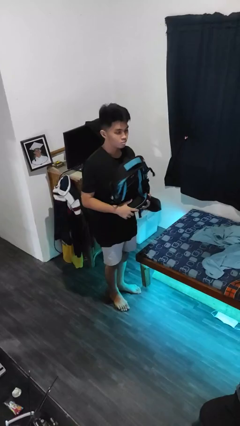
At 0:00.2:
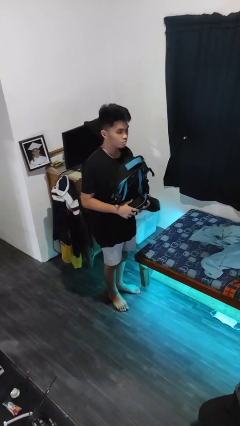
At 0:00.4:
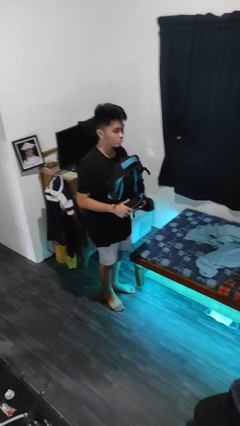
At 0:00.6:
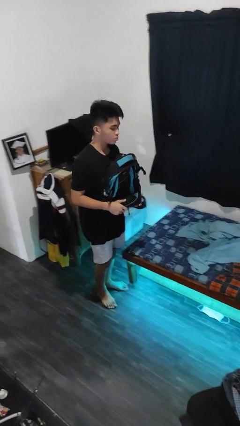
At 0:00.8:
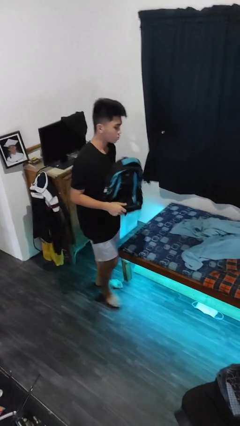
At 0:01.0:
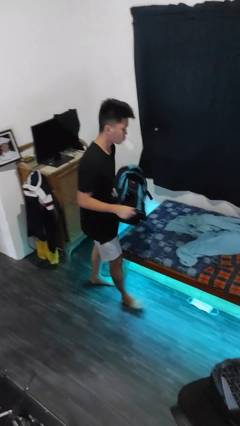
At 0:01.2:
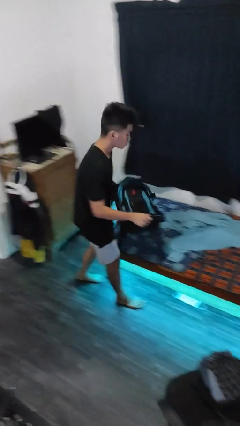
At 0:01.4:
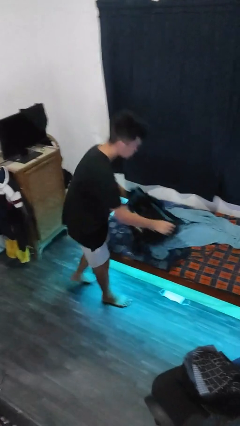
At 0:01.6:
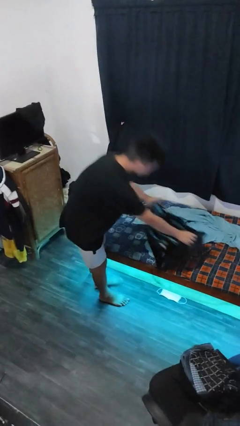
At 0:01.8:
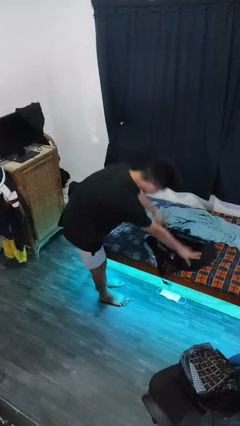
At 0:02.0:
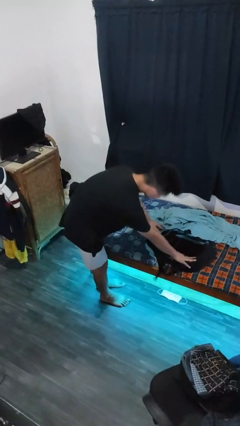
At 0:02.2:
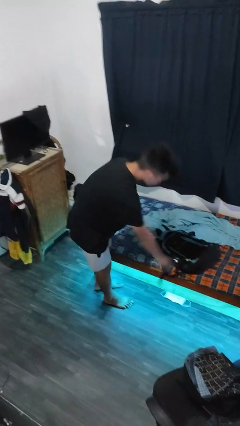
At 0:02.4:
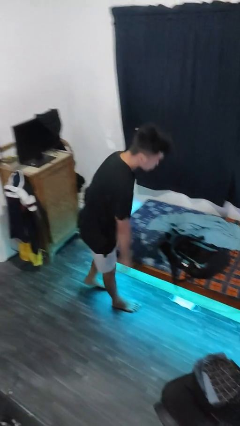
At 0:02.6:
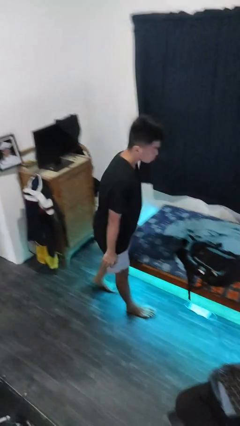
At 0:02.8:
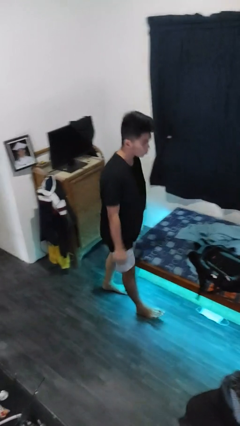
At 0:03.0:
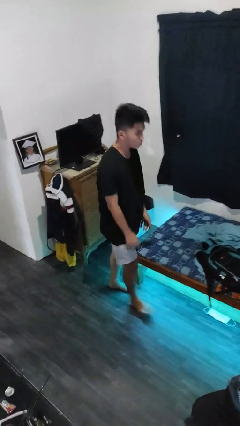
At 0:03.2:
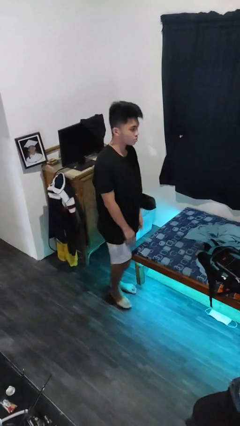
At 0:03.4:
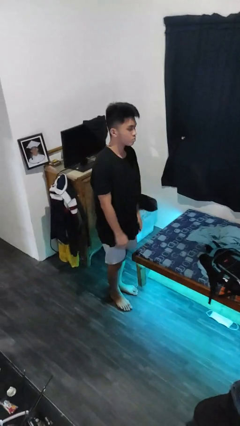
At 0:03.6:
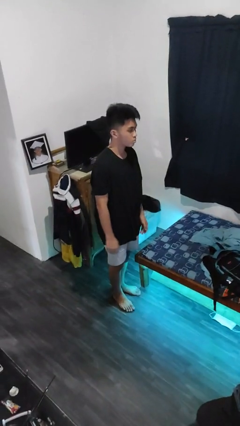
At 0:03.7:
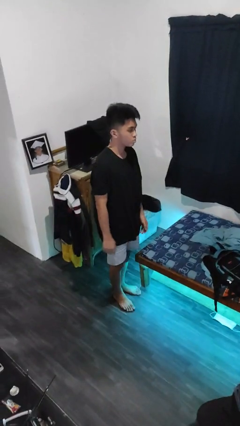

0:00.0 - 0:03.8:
person puts down object on bed

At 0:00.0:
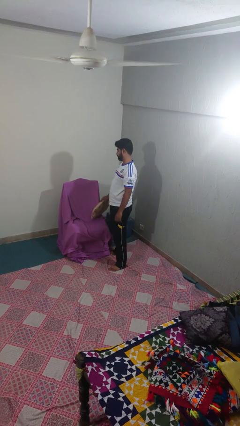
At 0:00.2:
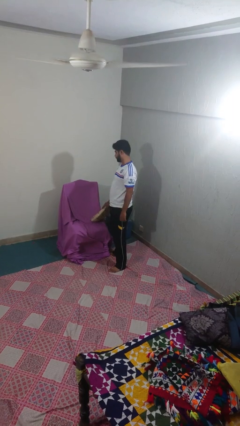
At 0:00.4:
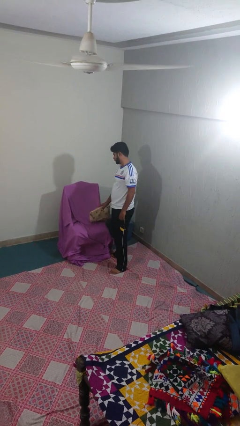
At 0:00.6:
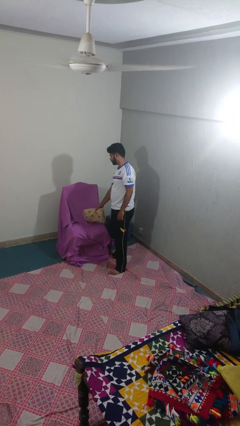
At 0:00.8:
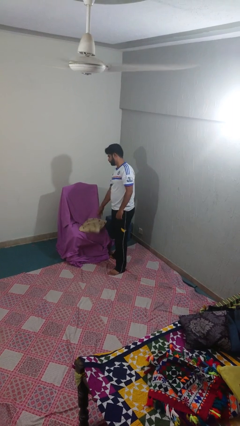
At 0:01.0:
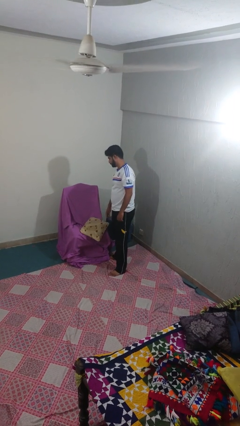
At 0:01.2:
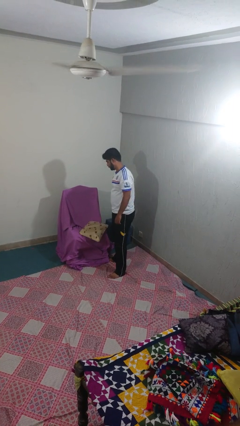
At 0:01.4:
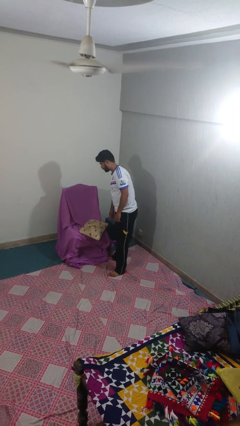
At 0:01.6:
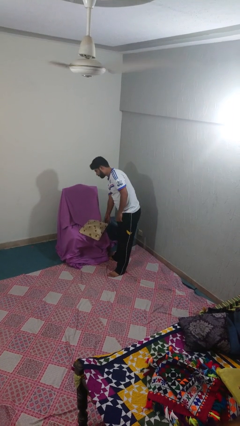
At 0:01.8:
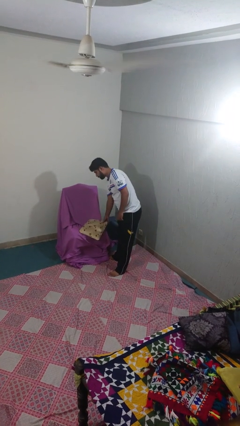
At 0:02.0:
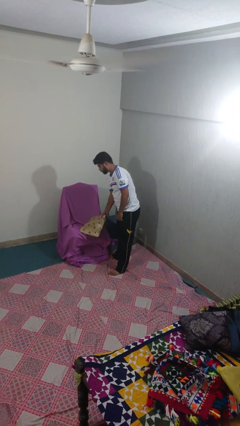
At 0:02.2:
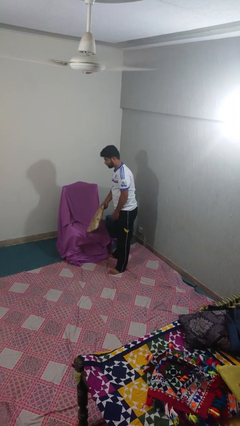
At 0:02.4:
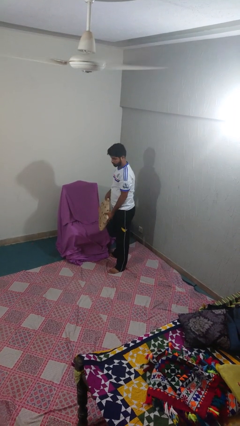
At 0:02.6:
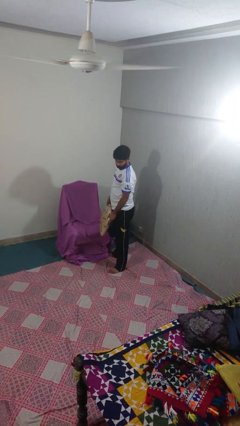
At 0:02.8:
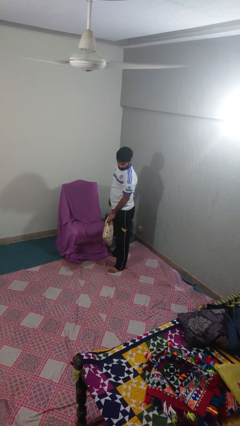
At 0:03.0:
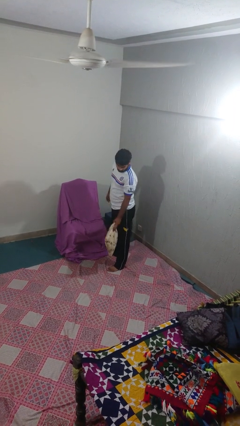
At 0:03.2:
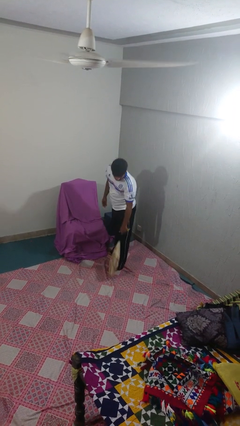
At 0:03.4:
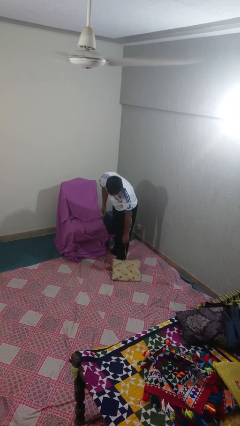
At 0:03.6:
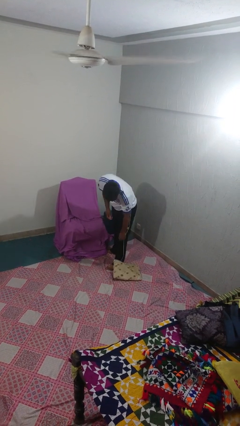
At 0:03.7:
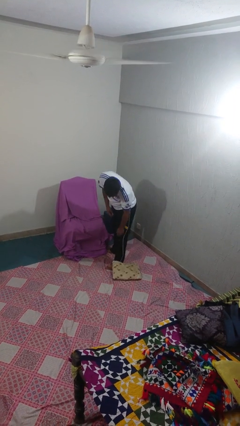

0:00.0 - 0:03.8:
person drops object

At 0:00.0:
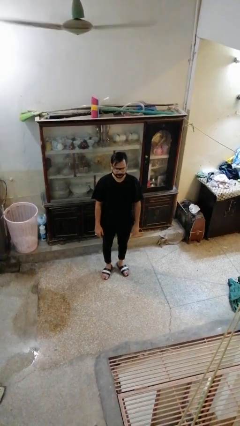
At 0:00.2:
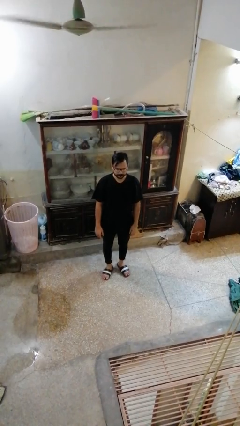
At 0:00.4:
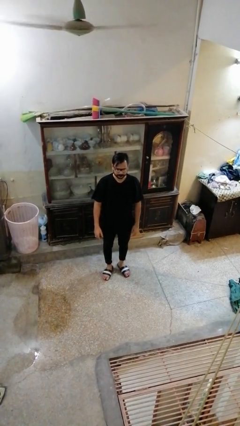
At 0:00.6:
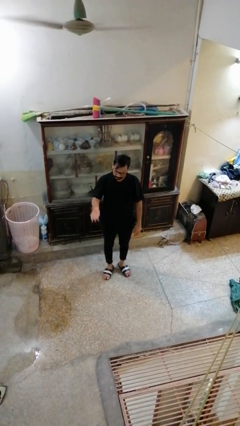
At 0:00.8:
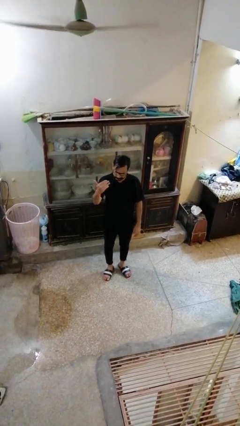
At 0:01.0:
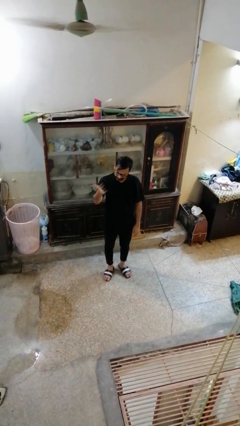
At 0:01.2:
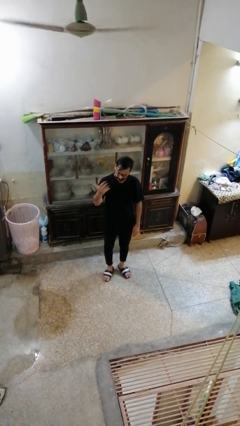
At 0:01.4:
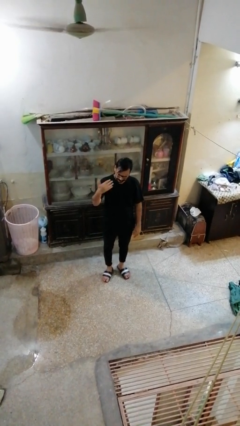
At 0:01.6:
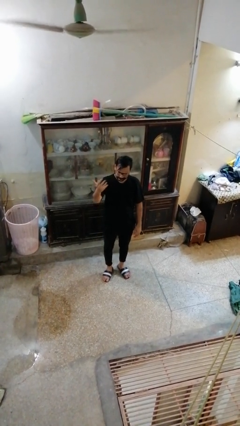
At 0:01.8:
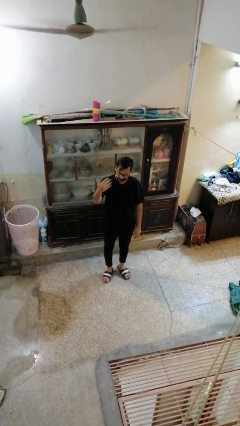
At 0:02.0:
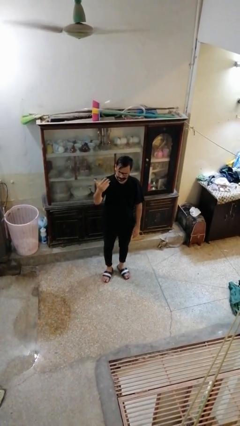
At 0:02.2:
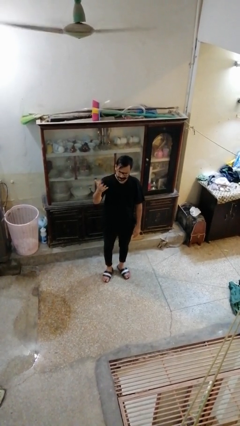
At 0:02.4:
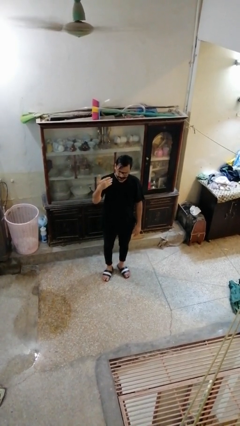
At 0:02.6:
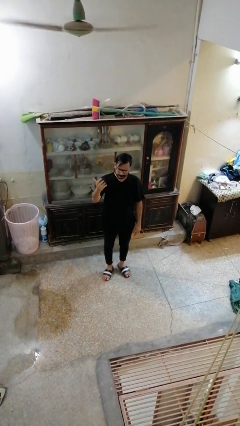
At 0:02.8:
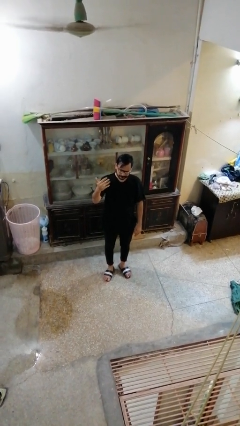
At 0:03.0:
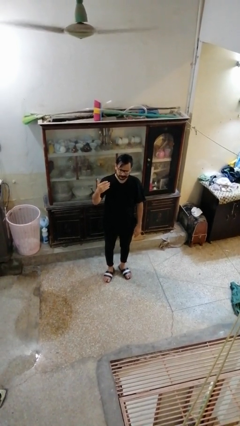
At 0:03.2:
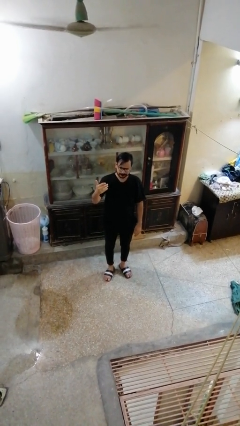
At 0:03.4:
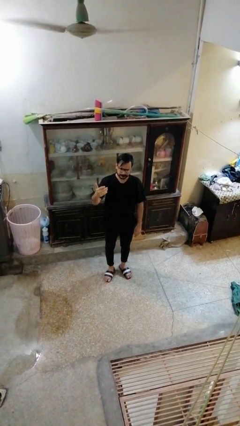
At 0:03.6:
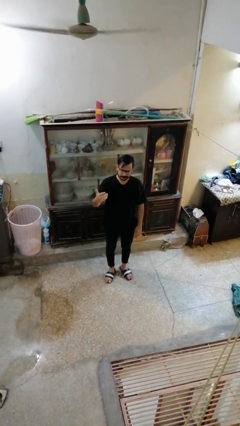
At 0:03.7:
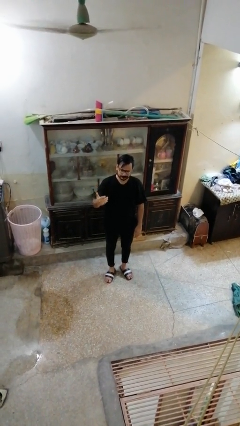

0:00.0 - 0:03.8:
person gestures come here

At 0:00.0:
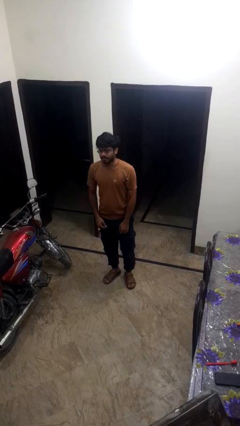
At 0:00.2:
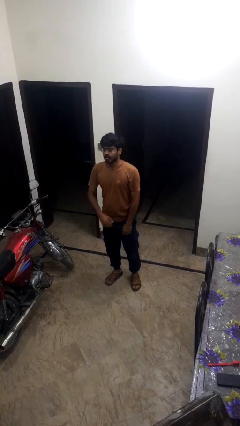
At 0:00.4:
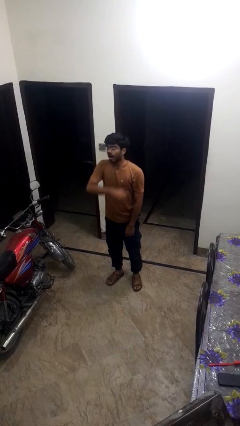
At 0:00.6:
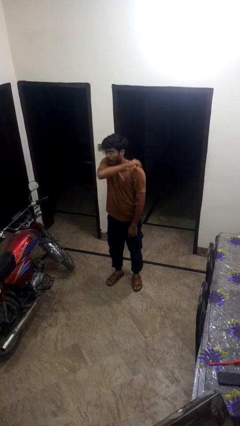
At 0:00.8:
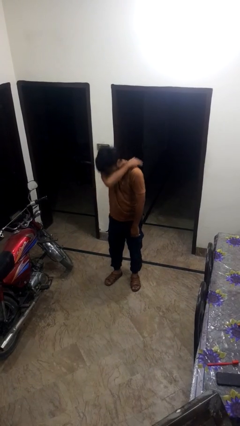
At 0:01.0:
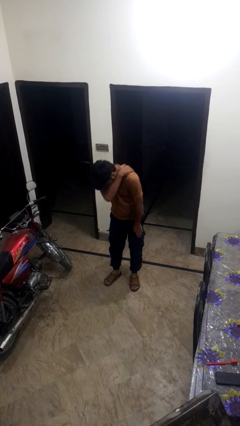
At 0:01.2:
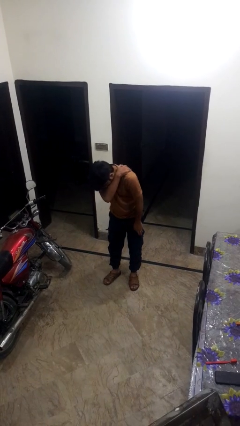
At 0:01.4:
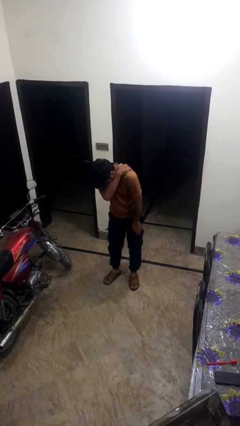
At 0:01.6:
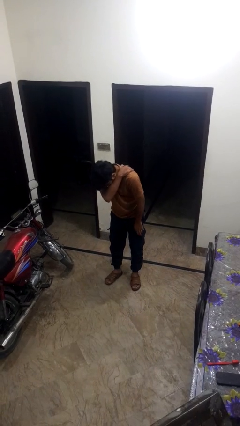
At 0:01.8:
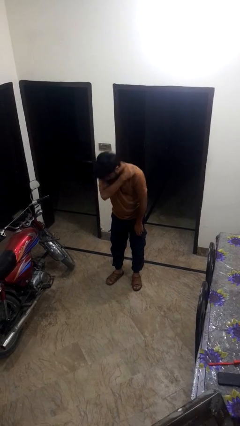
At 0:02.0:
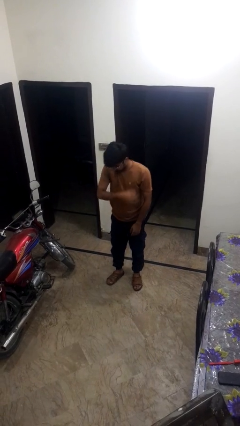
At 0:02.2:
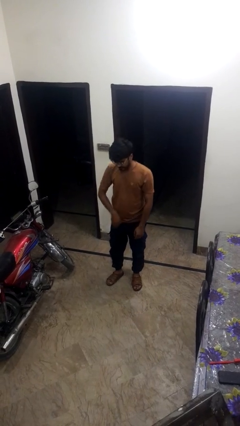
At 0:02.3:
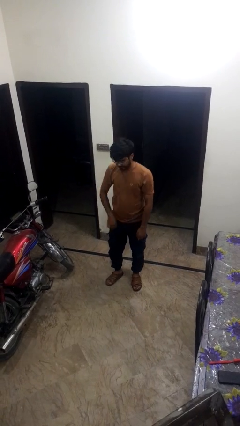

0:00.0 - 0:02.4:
person sneezes into arm

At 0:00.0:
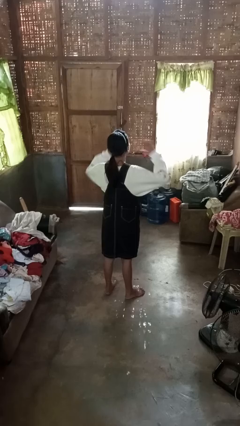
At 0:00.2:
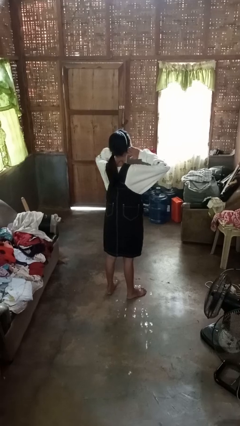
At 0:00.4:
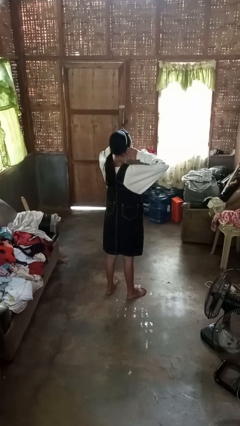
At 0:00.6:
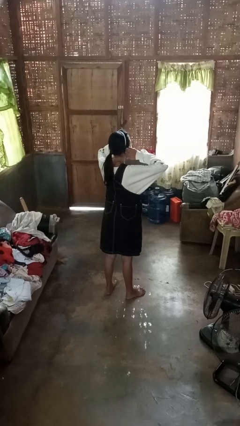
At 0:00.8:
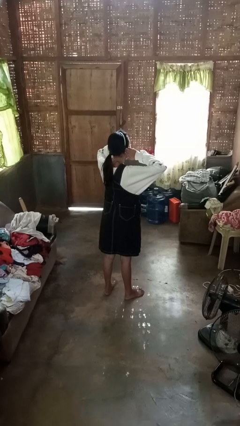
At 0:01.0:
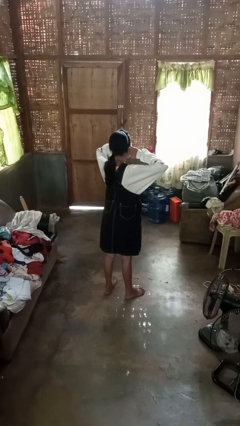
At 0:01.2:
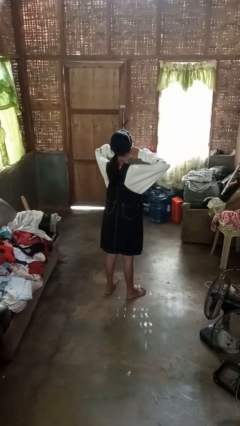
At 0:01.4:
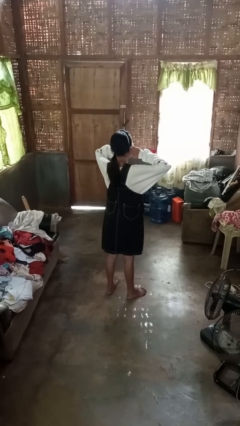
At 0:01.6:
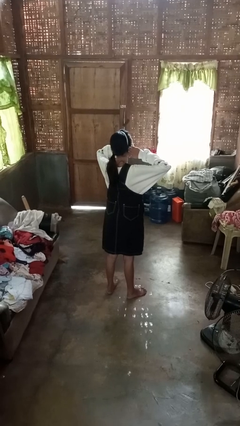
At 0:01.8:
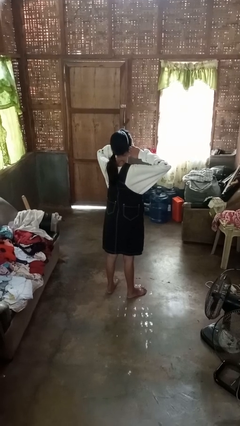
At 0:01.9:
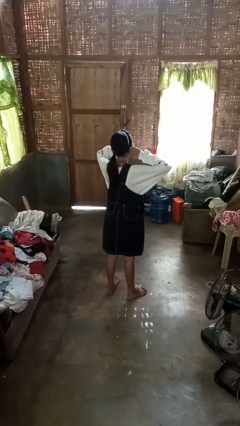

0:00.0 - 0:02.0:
person puts fingers in ear

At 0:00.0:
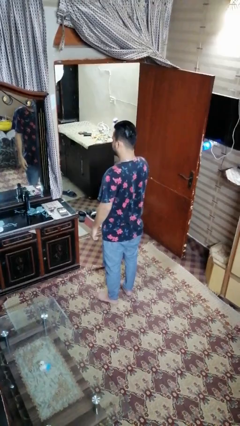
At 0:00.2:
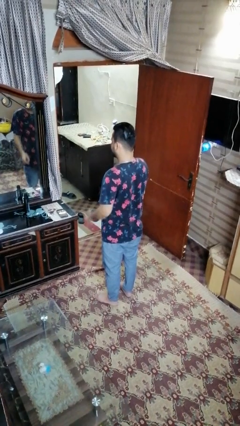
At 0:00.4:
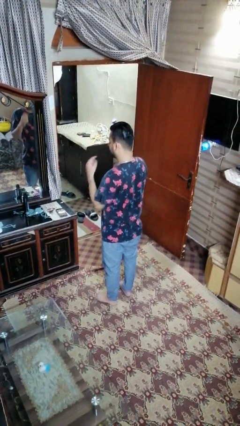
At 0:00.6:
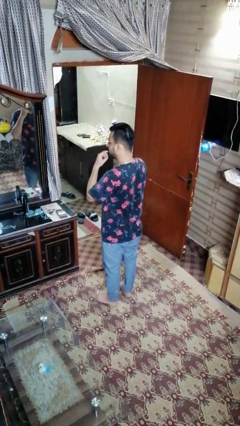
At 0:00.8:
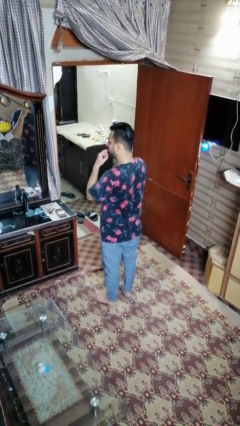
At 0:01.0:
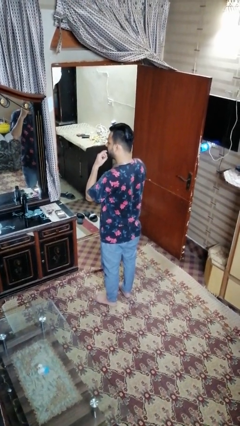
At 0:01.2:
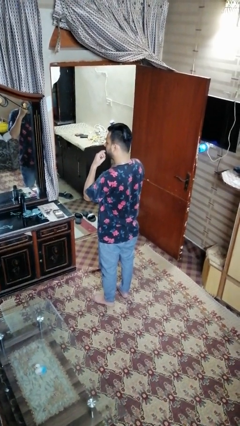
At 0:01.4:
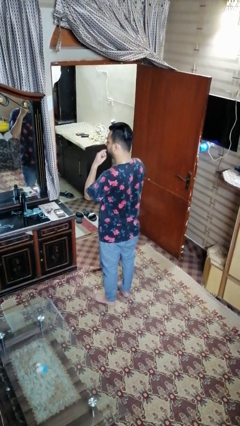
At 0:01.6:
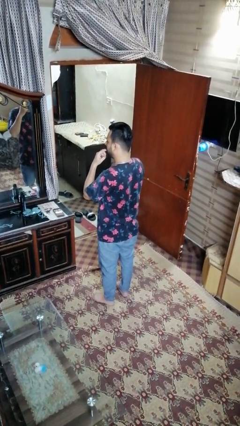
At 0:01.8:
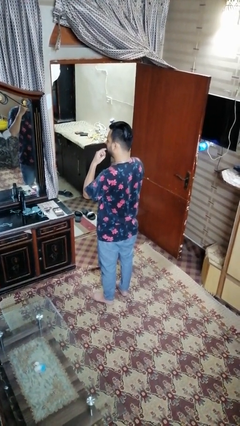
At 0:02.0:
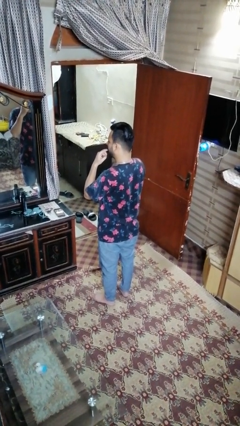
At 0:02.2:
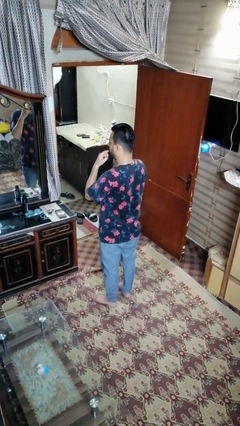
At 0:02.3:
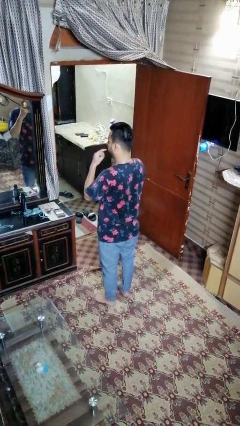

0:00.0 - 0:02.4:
person licks fingers
